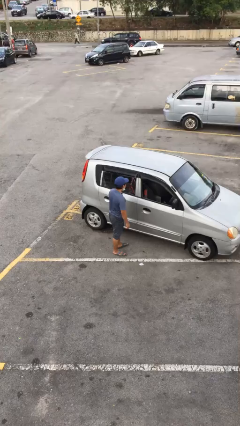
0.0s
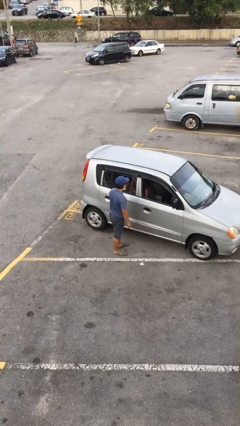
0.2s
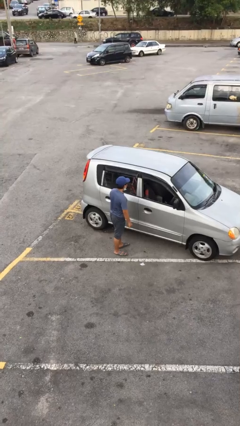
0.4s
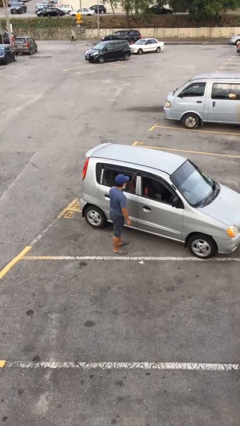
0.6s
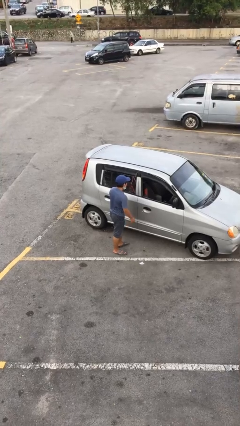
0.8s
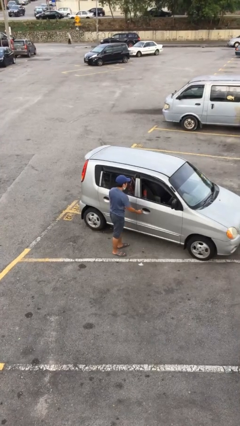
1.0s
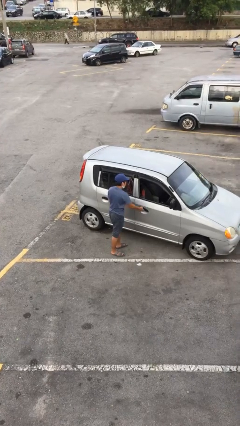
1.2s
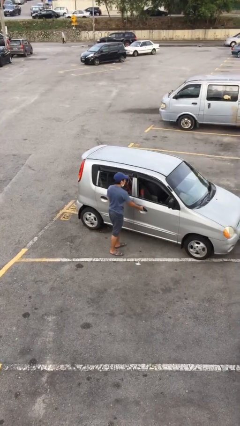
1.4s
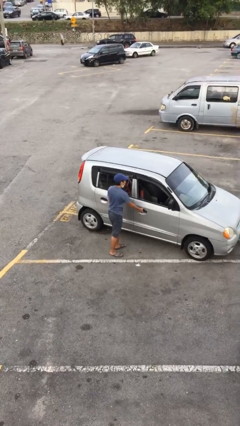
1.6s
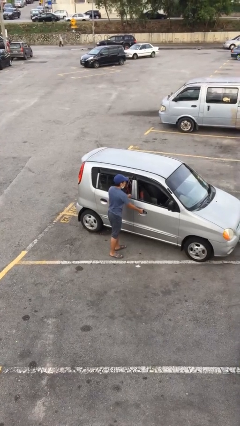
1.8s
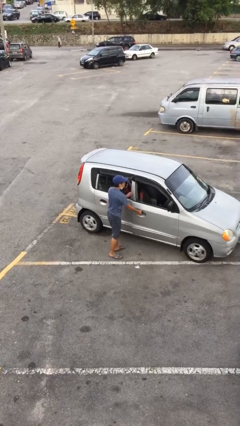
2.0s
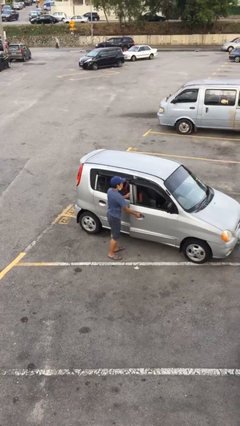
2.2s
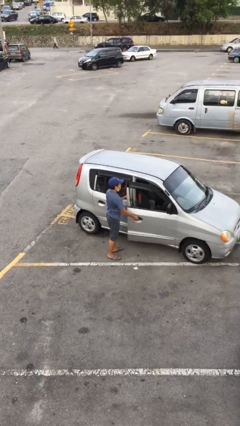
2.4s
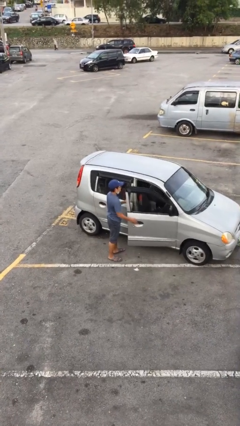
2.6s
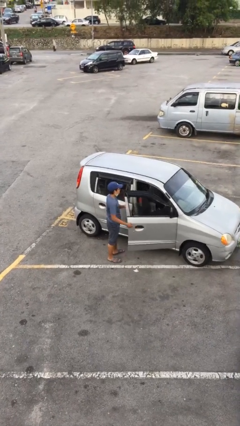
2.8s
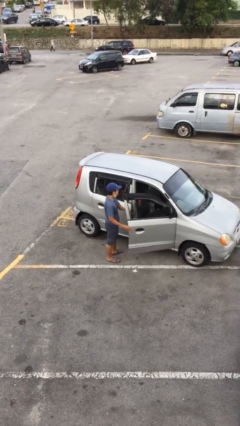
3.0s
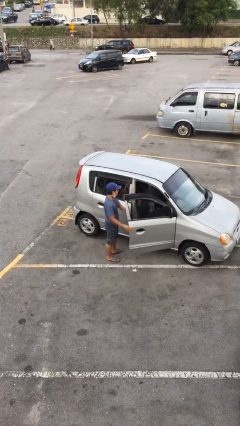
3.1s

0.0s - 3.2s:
person opens car door

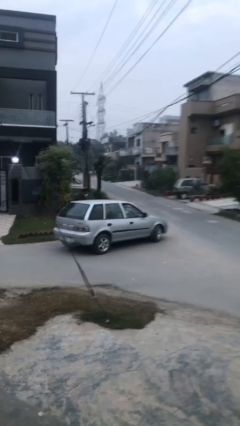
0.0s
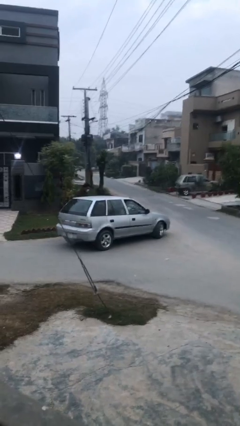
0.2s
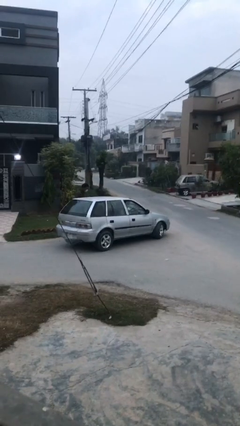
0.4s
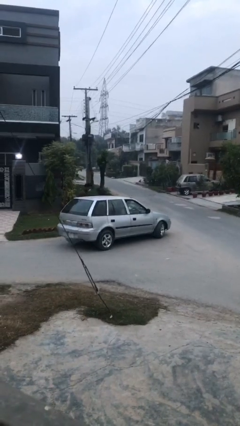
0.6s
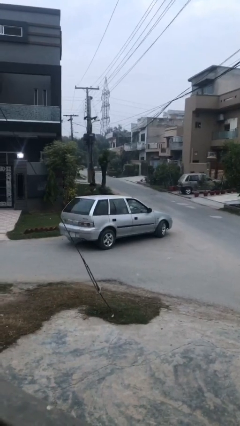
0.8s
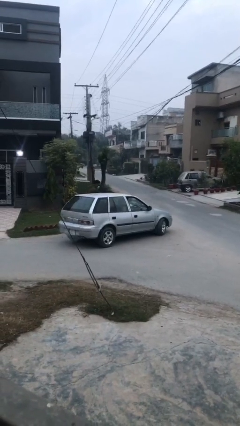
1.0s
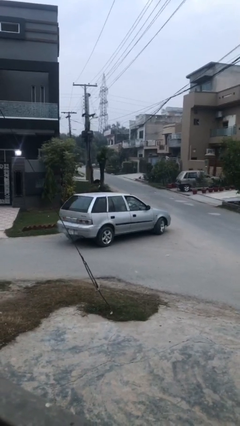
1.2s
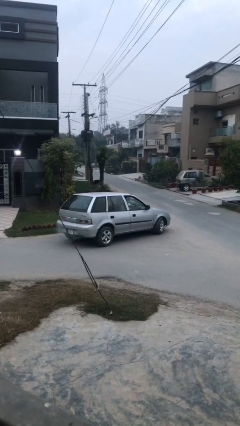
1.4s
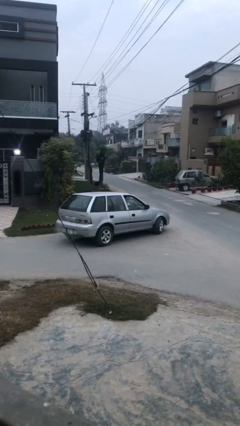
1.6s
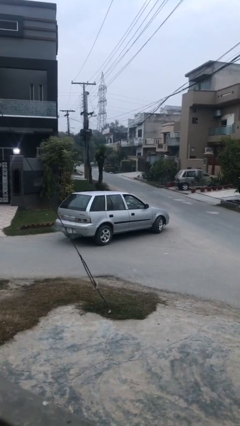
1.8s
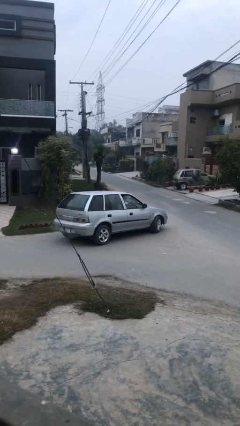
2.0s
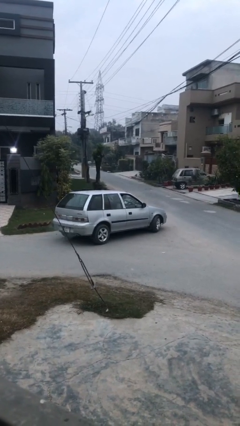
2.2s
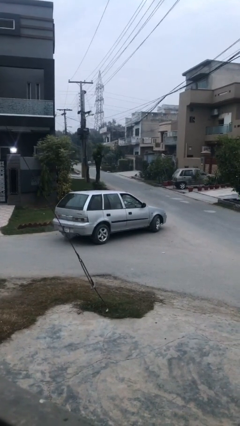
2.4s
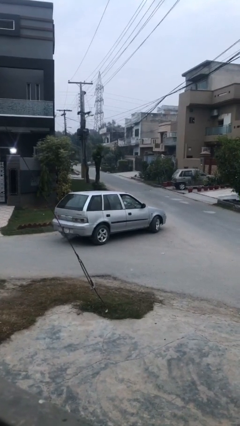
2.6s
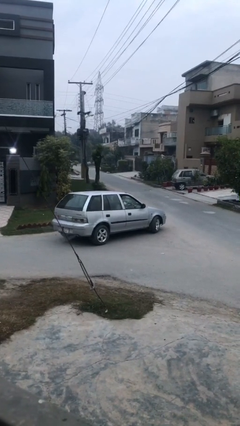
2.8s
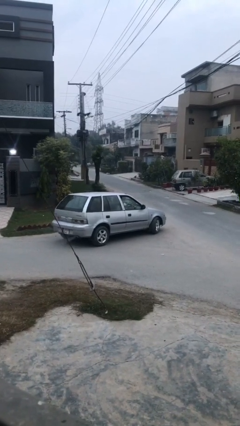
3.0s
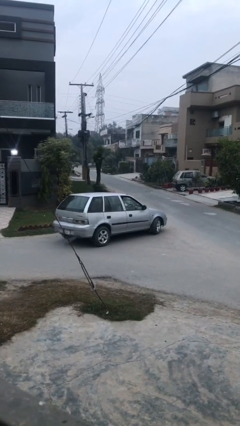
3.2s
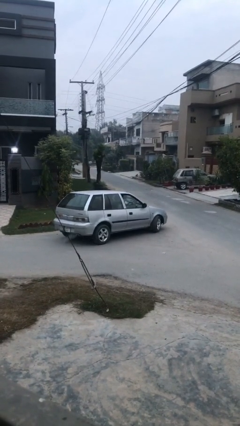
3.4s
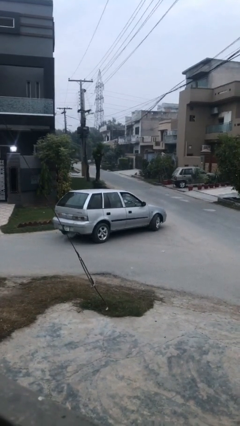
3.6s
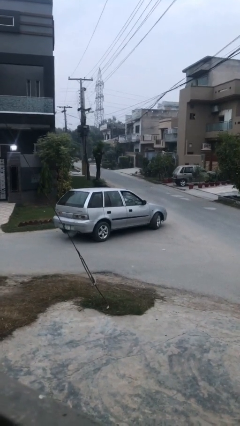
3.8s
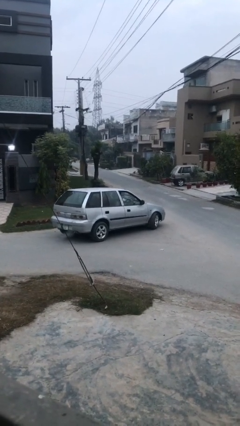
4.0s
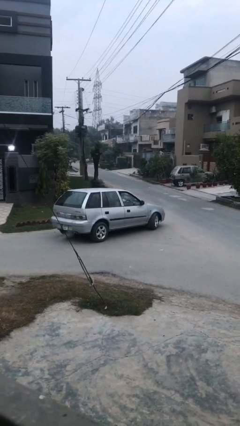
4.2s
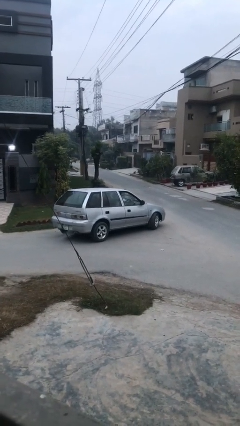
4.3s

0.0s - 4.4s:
car picks up person

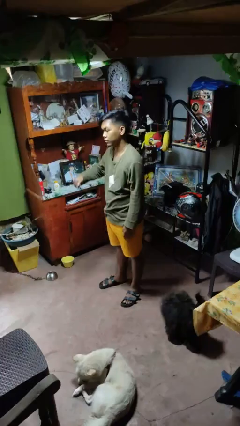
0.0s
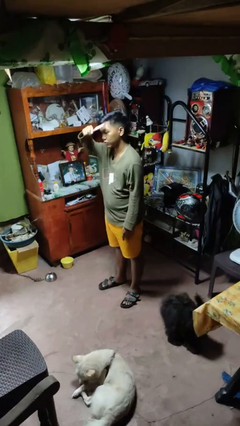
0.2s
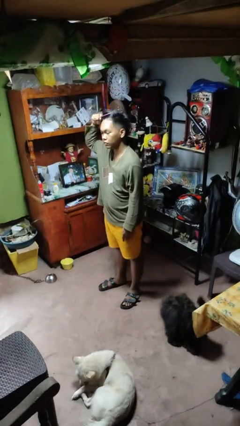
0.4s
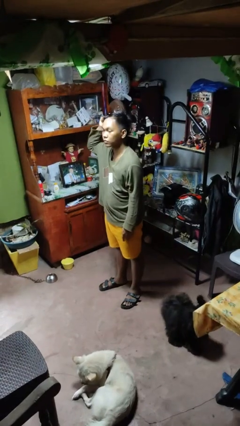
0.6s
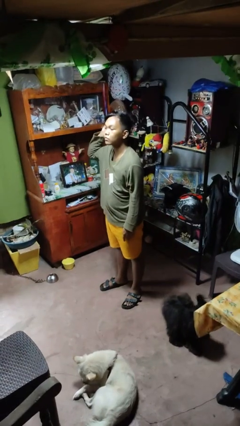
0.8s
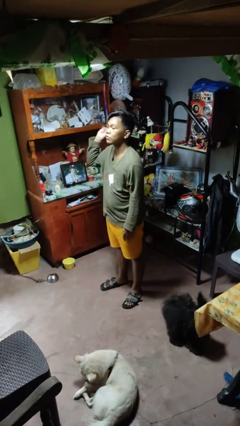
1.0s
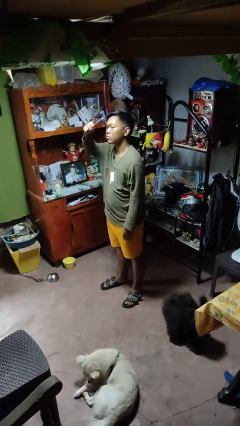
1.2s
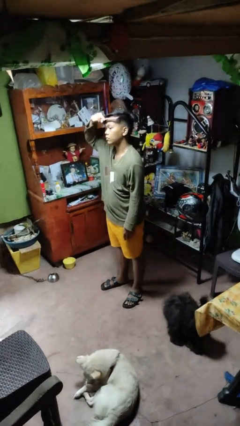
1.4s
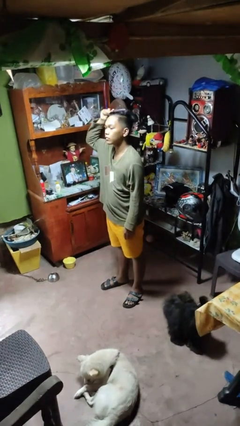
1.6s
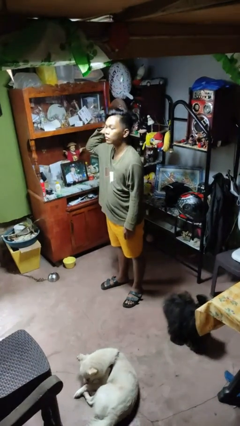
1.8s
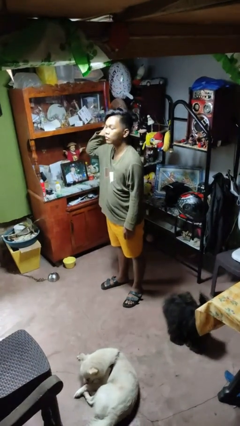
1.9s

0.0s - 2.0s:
person brushes hair

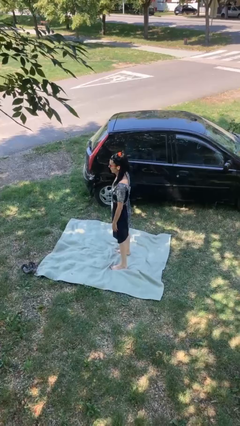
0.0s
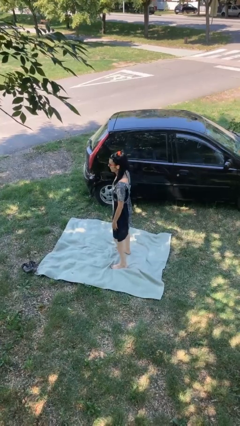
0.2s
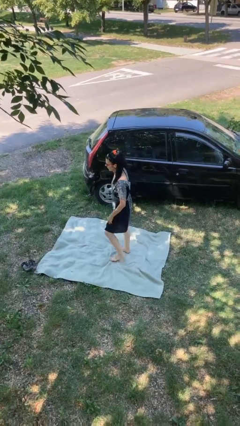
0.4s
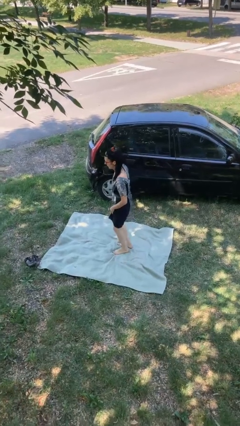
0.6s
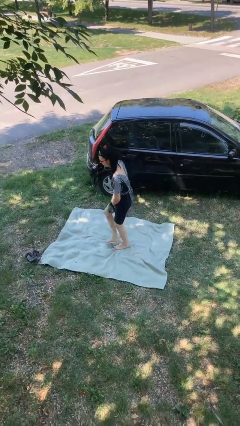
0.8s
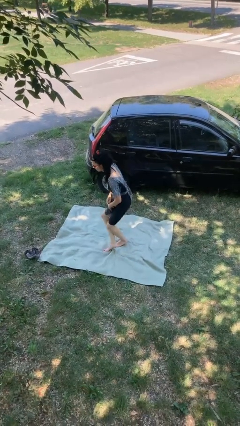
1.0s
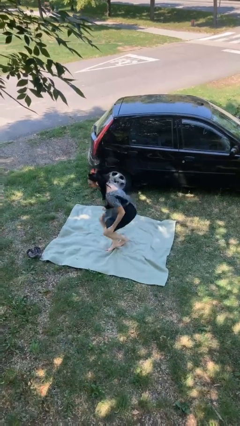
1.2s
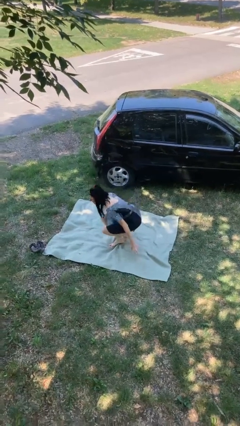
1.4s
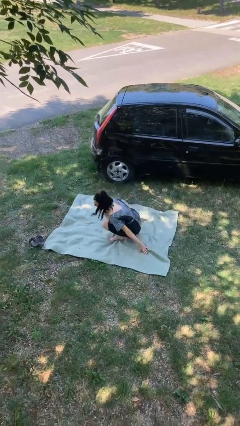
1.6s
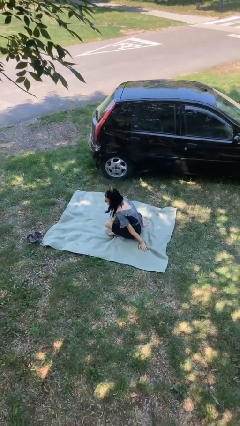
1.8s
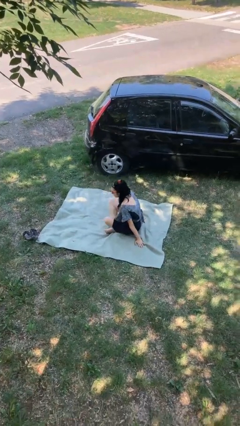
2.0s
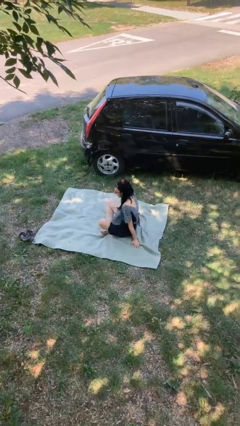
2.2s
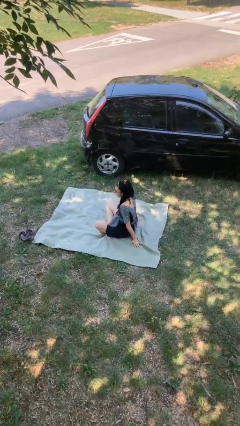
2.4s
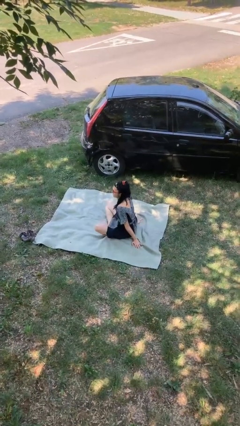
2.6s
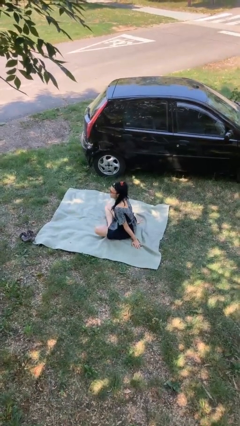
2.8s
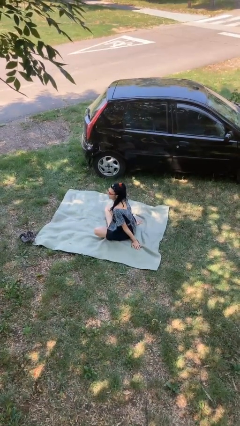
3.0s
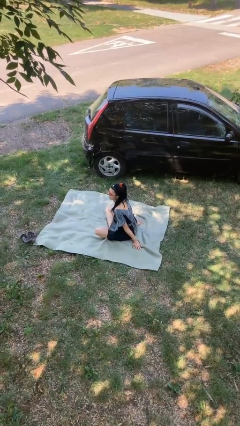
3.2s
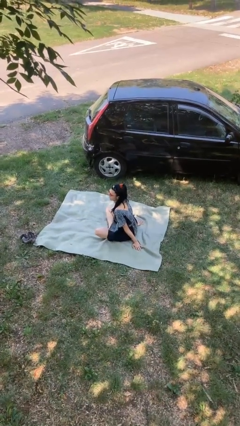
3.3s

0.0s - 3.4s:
person sits crisscross

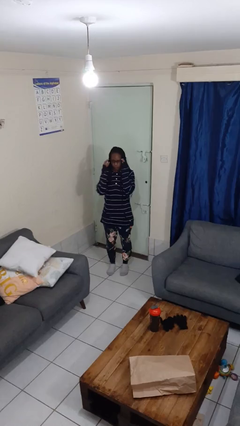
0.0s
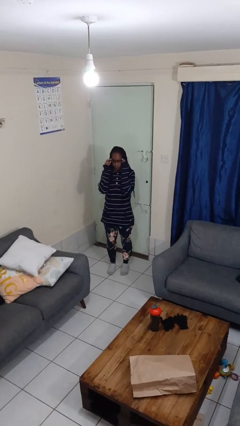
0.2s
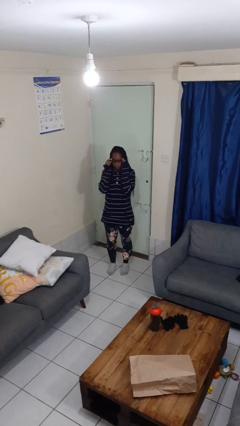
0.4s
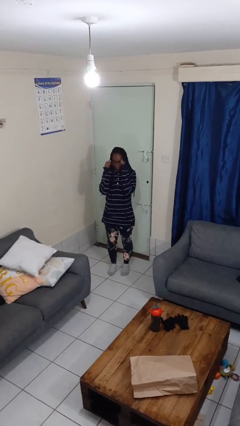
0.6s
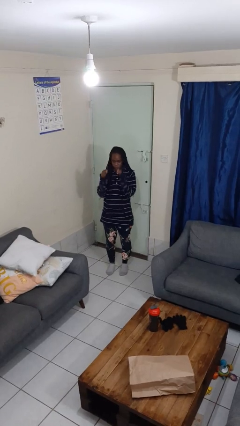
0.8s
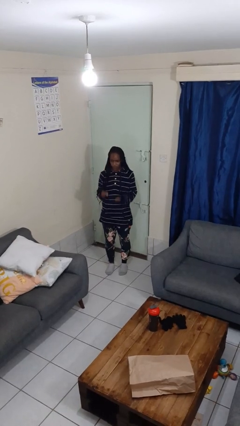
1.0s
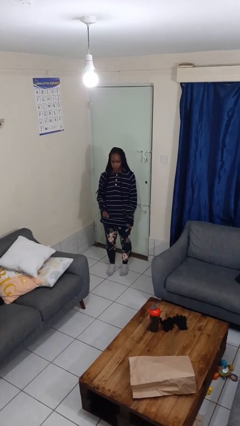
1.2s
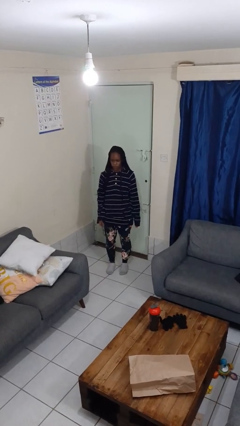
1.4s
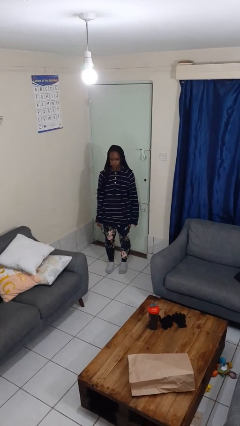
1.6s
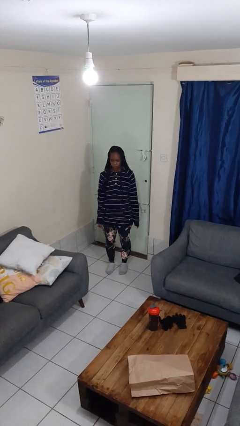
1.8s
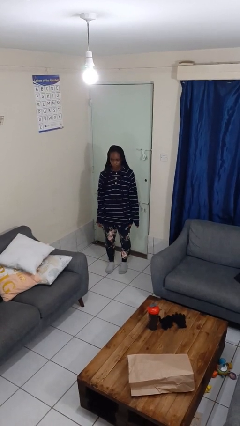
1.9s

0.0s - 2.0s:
person takes off glasses

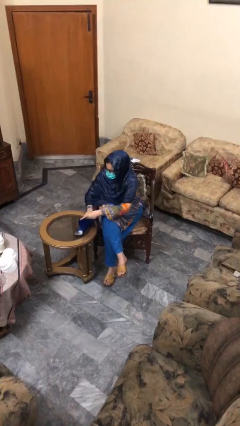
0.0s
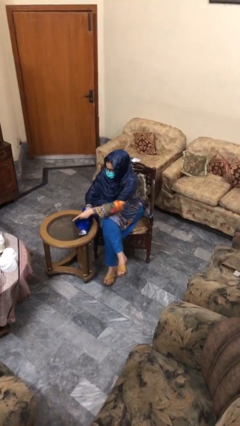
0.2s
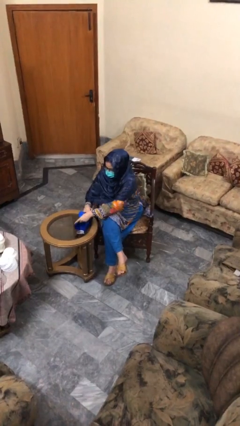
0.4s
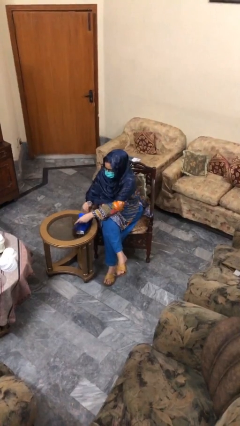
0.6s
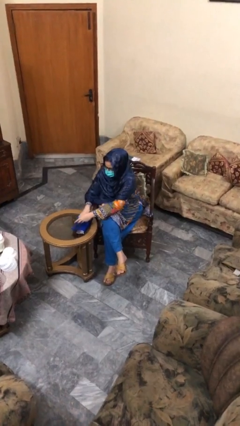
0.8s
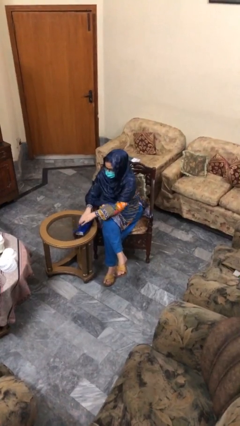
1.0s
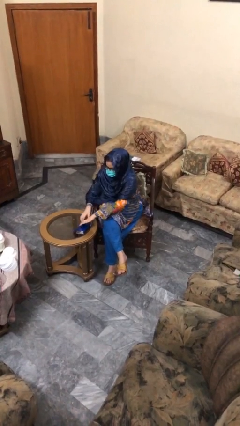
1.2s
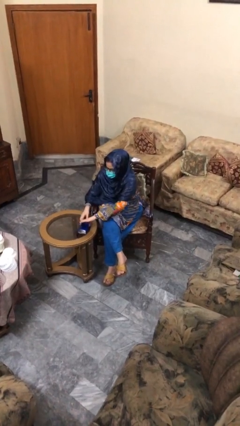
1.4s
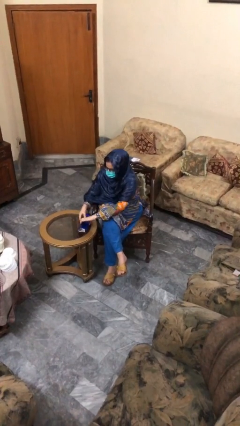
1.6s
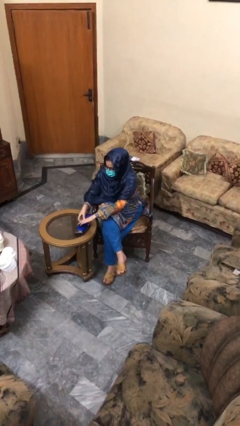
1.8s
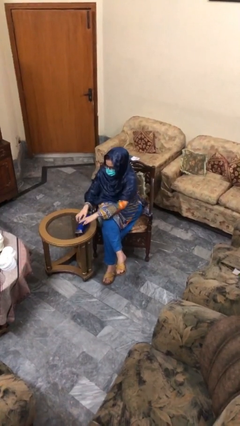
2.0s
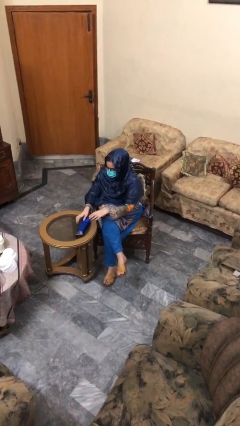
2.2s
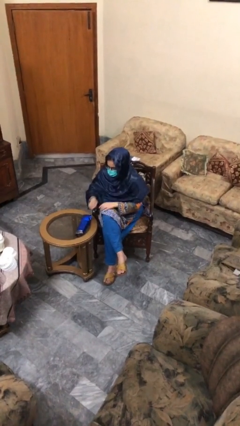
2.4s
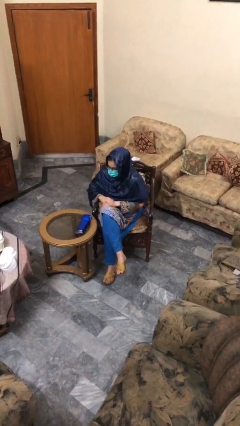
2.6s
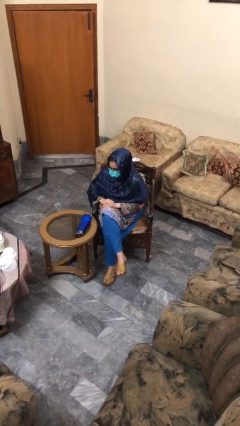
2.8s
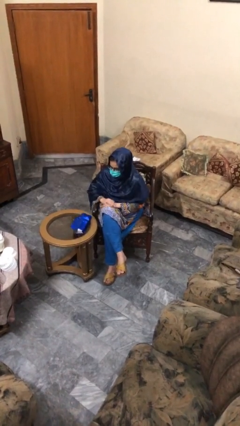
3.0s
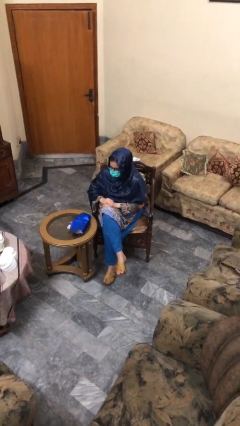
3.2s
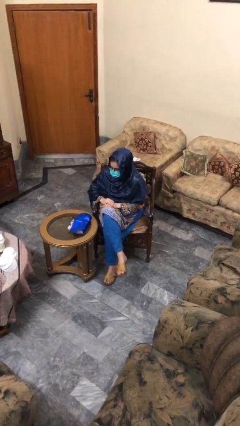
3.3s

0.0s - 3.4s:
person wraps box
